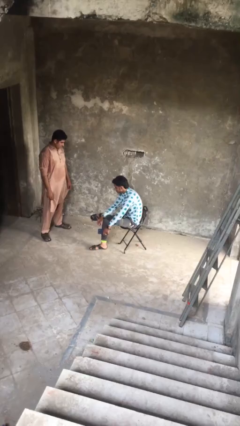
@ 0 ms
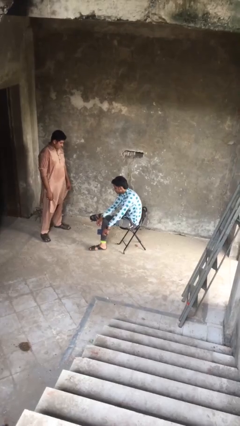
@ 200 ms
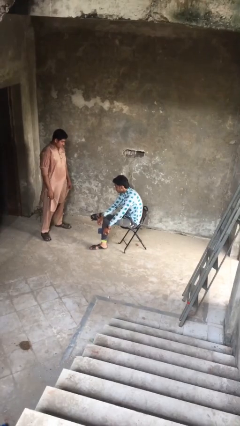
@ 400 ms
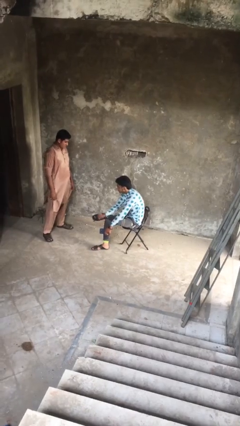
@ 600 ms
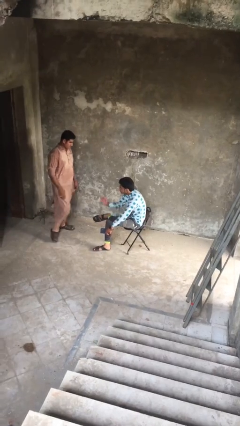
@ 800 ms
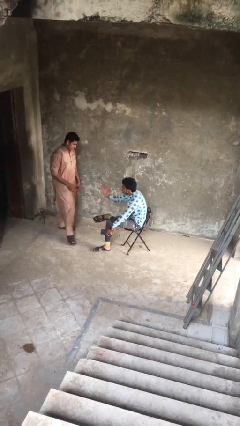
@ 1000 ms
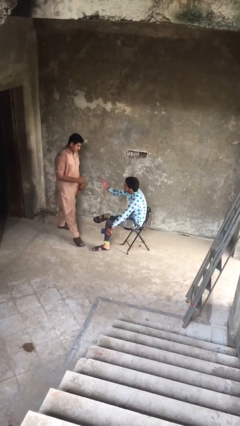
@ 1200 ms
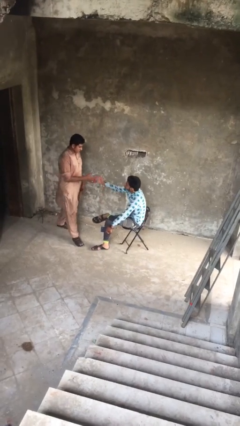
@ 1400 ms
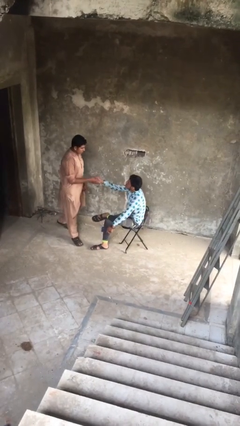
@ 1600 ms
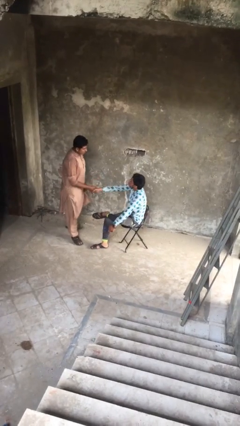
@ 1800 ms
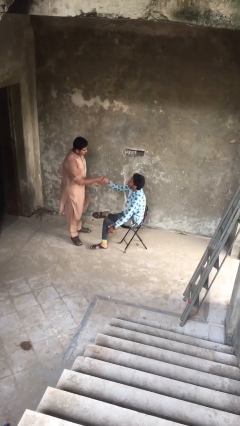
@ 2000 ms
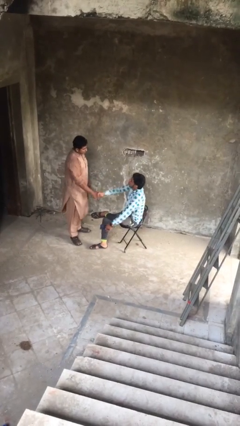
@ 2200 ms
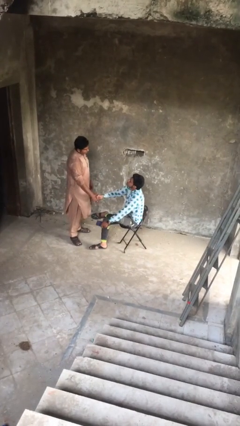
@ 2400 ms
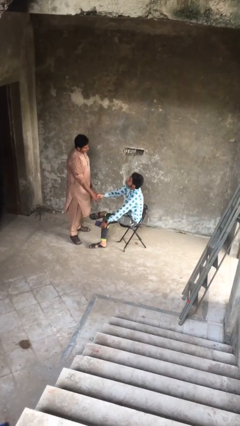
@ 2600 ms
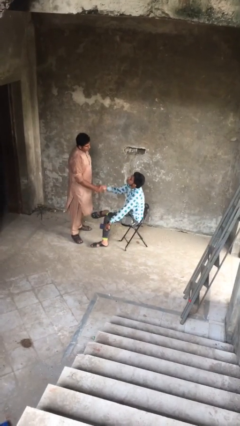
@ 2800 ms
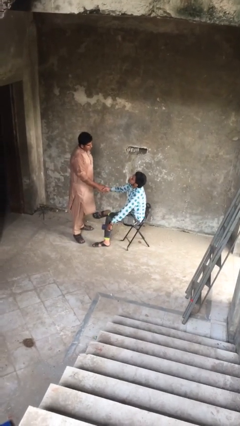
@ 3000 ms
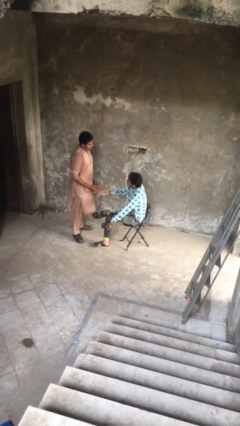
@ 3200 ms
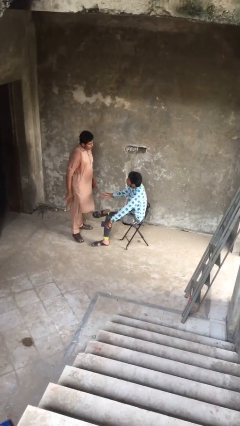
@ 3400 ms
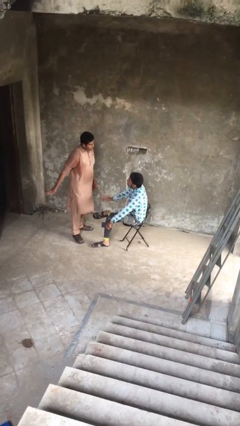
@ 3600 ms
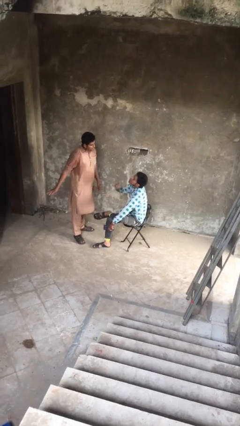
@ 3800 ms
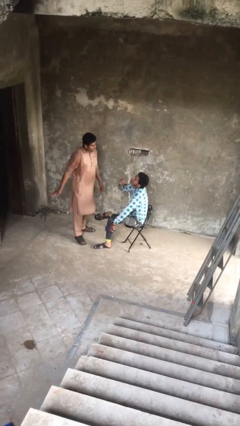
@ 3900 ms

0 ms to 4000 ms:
person shakes hand

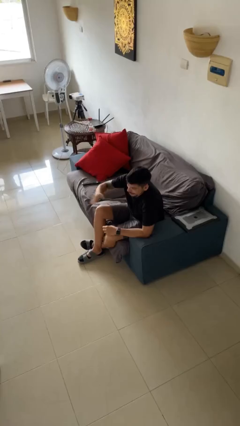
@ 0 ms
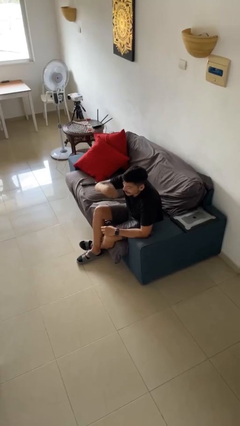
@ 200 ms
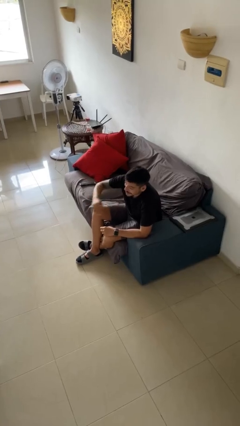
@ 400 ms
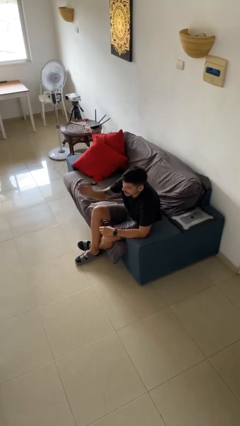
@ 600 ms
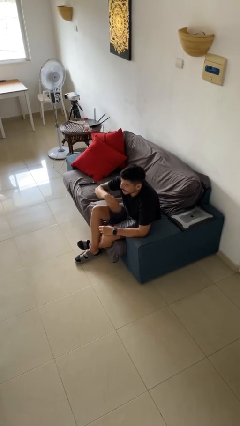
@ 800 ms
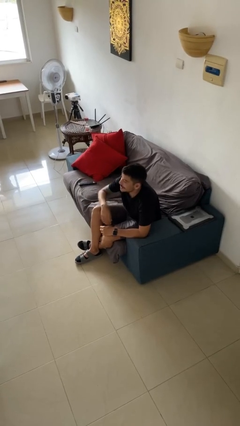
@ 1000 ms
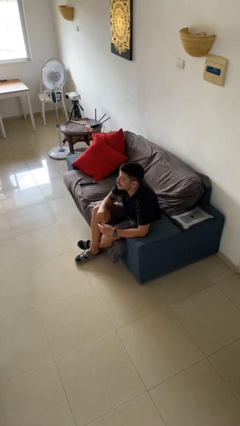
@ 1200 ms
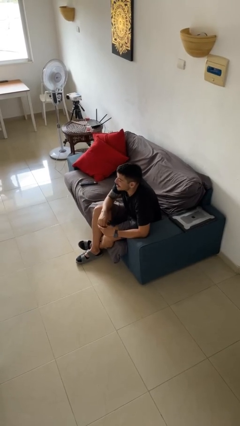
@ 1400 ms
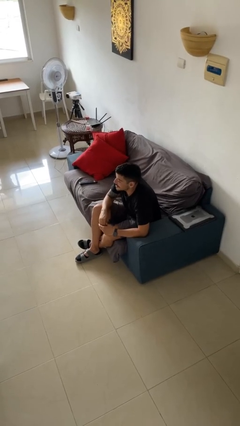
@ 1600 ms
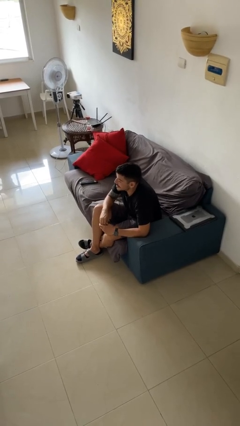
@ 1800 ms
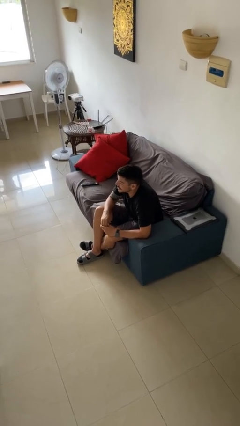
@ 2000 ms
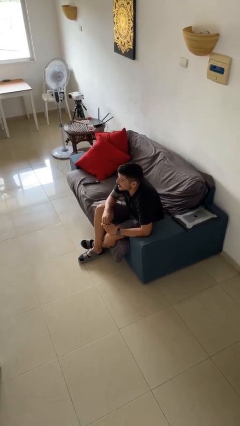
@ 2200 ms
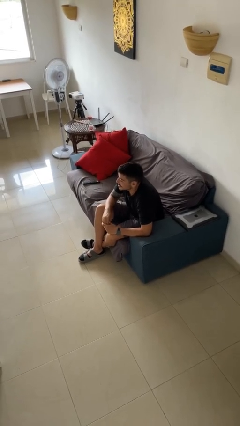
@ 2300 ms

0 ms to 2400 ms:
person gestures come here

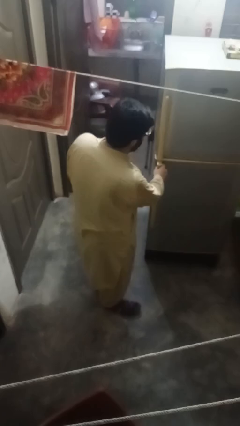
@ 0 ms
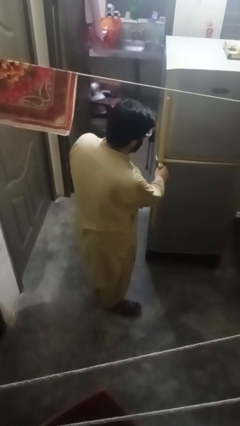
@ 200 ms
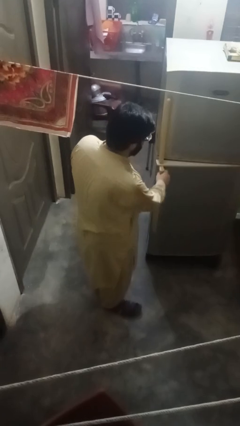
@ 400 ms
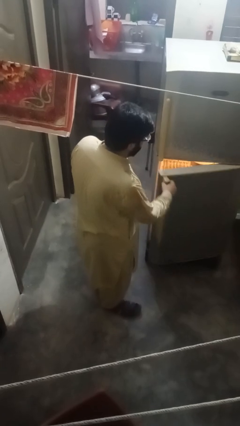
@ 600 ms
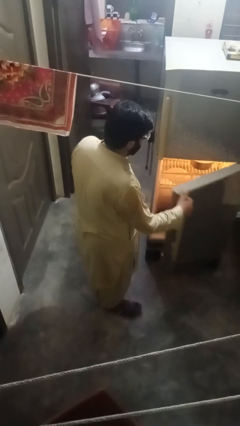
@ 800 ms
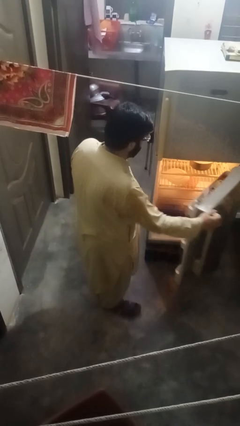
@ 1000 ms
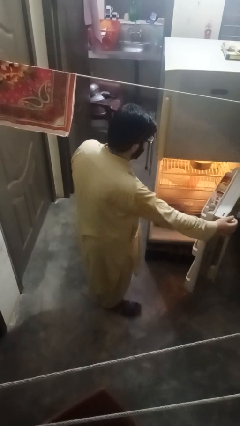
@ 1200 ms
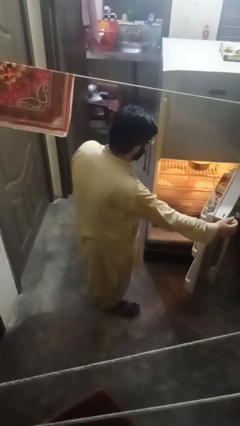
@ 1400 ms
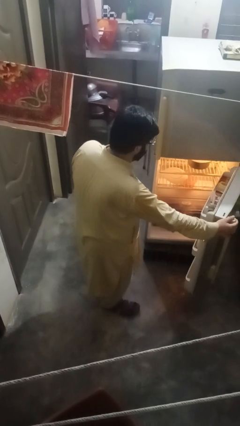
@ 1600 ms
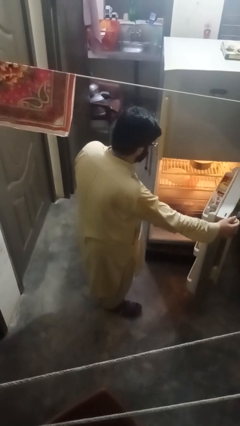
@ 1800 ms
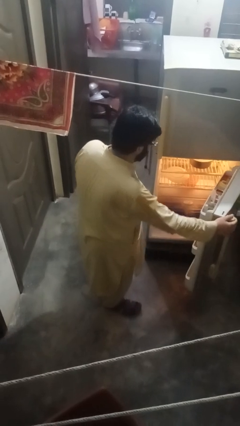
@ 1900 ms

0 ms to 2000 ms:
person opens refrigerator

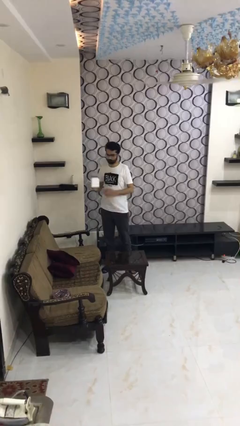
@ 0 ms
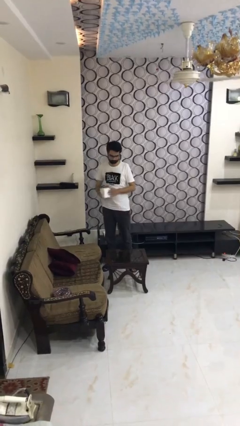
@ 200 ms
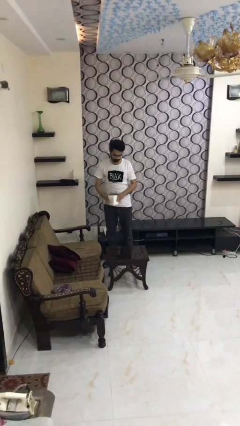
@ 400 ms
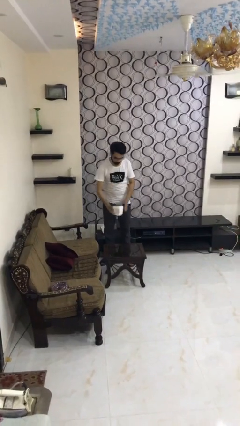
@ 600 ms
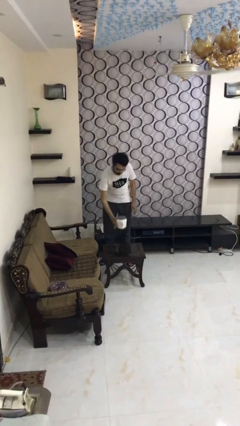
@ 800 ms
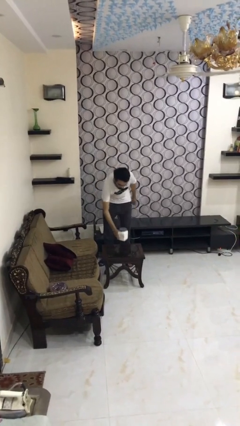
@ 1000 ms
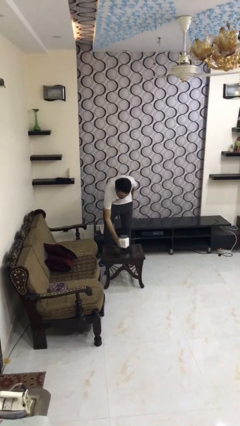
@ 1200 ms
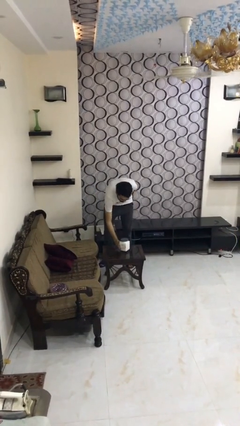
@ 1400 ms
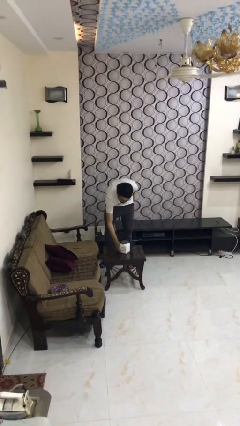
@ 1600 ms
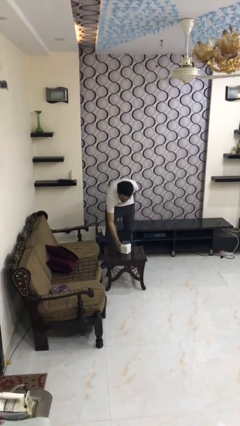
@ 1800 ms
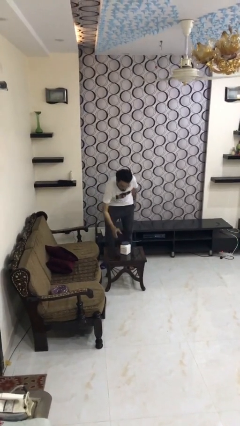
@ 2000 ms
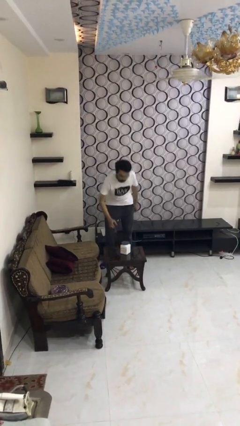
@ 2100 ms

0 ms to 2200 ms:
person puts down object on table

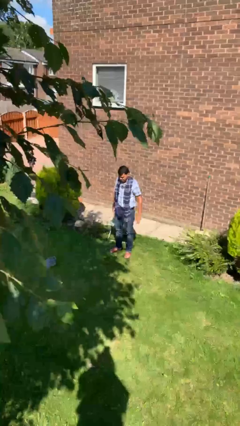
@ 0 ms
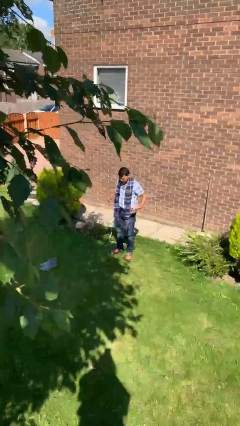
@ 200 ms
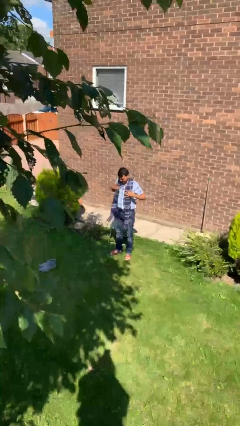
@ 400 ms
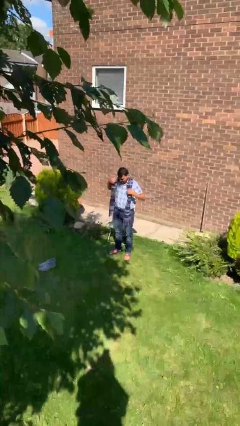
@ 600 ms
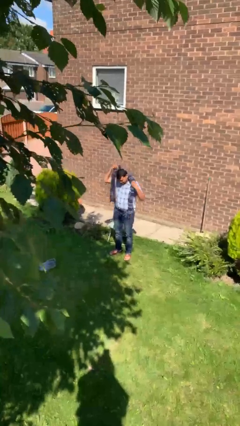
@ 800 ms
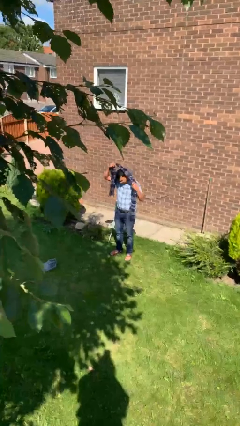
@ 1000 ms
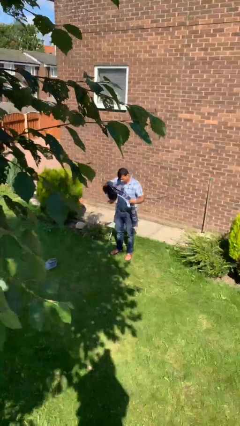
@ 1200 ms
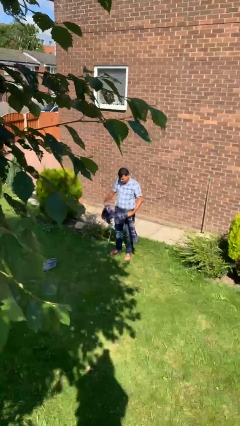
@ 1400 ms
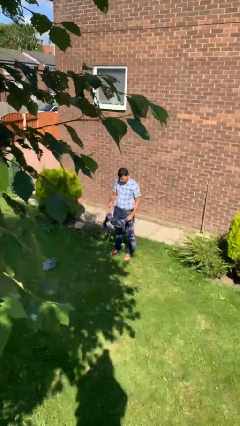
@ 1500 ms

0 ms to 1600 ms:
person takes off scarf

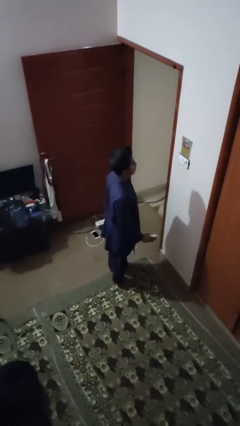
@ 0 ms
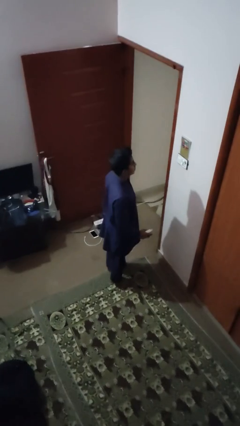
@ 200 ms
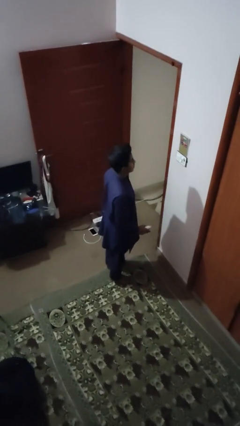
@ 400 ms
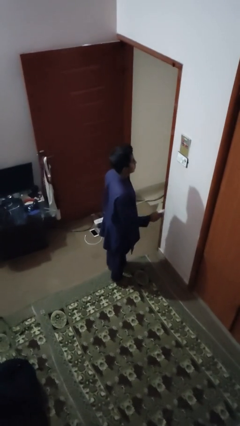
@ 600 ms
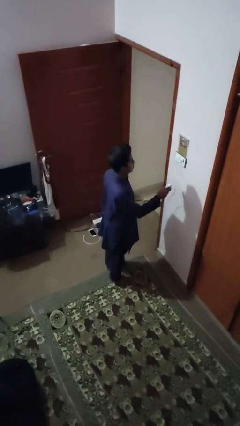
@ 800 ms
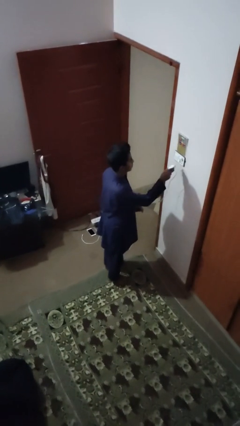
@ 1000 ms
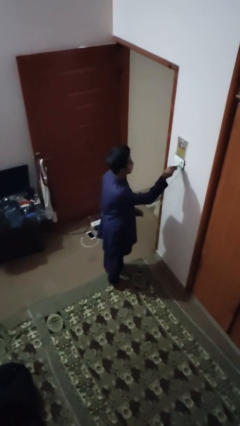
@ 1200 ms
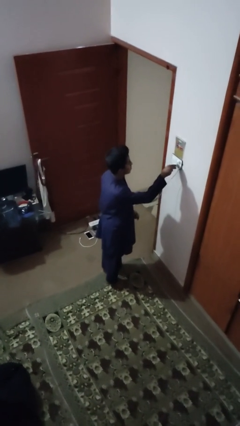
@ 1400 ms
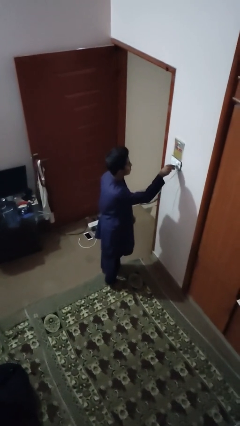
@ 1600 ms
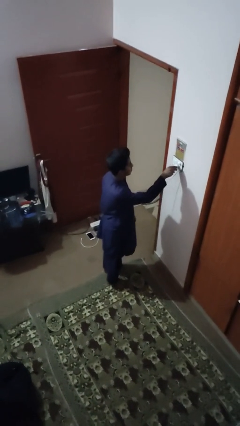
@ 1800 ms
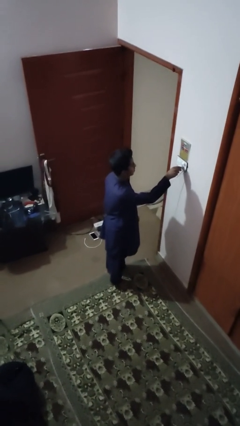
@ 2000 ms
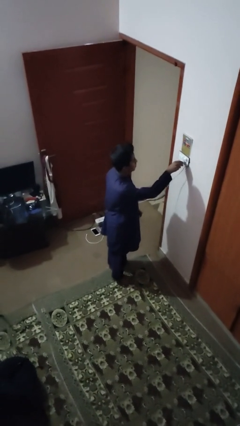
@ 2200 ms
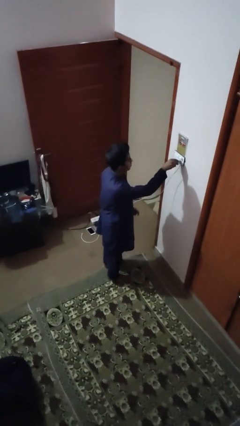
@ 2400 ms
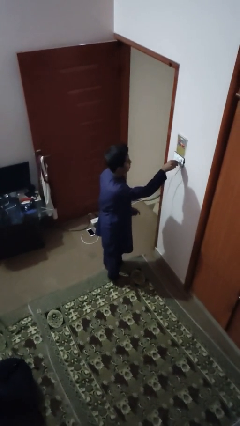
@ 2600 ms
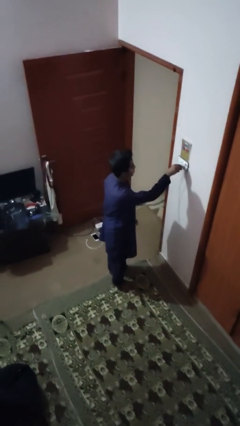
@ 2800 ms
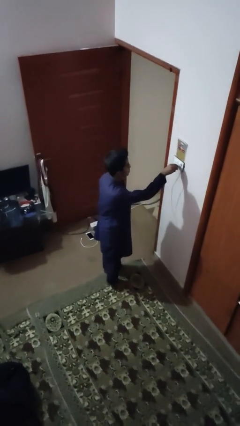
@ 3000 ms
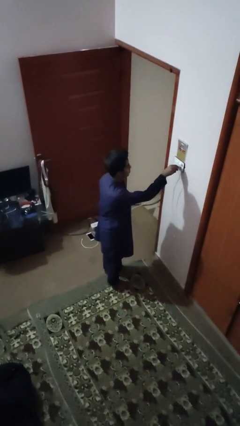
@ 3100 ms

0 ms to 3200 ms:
person plugs into electrical socket

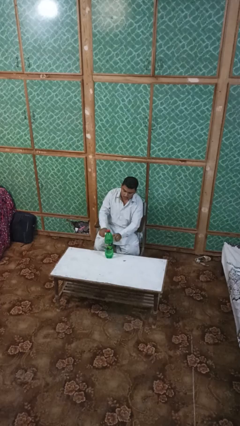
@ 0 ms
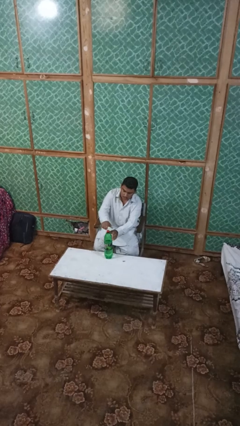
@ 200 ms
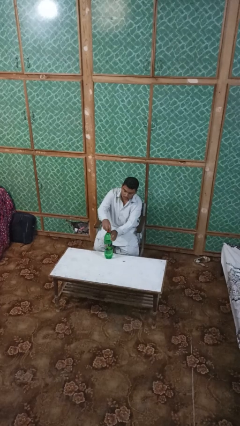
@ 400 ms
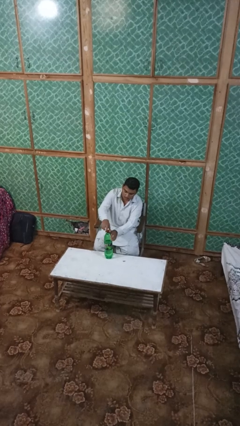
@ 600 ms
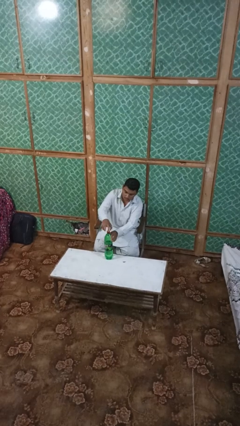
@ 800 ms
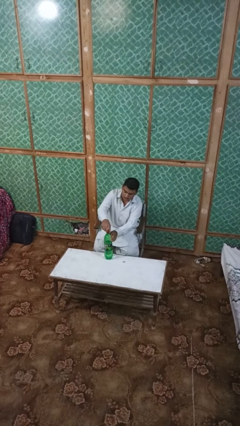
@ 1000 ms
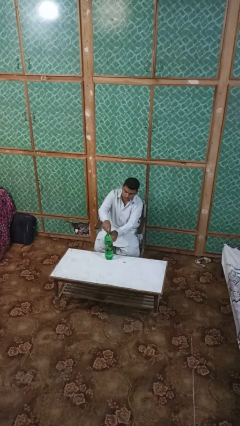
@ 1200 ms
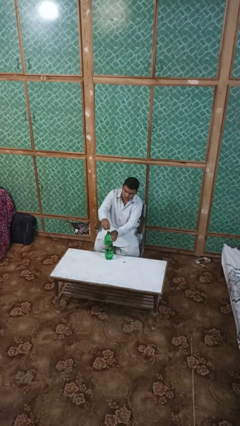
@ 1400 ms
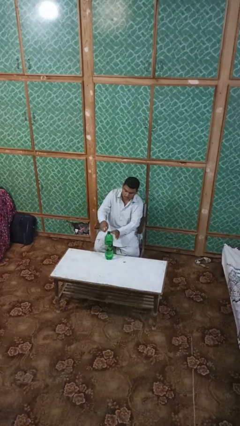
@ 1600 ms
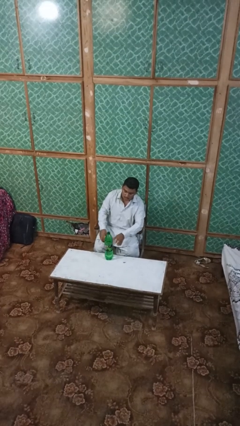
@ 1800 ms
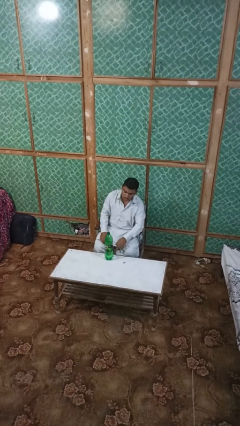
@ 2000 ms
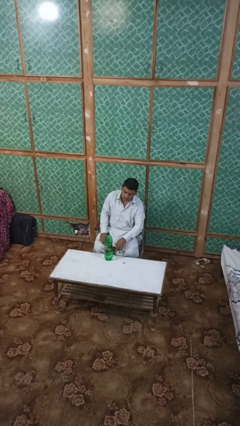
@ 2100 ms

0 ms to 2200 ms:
person unscrews lid from bottle
